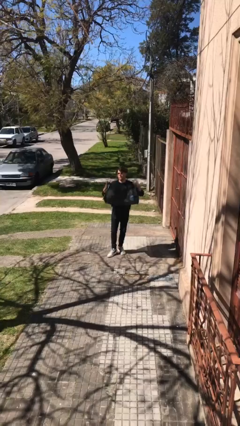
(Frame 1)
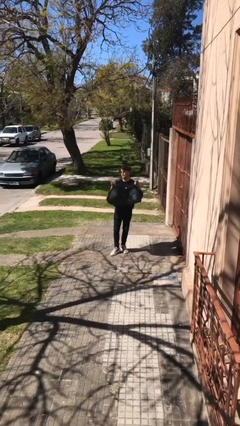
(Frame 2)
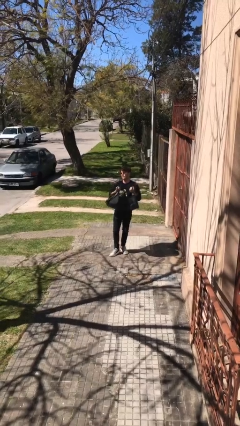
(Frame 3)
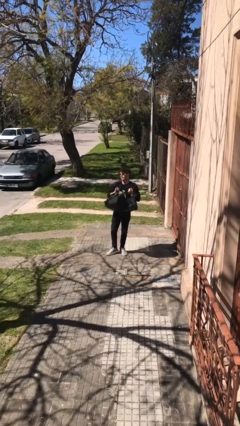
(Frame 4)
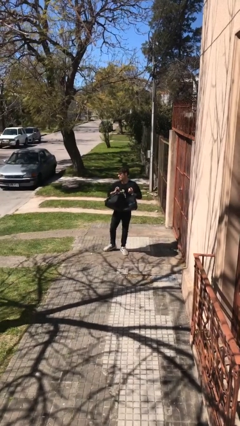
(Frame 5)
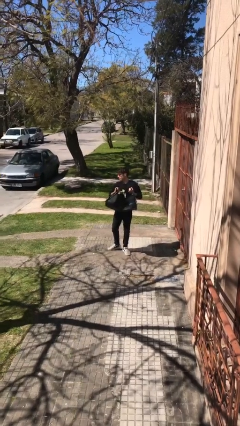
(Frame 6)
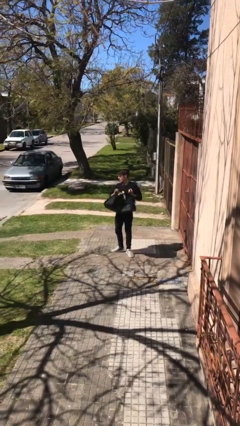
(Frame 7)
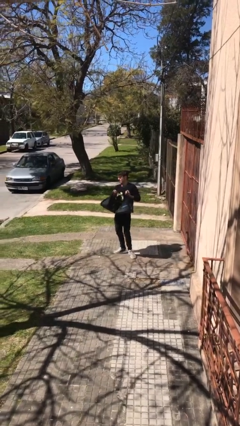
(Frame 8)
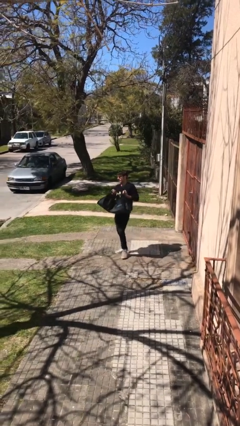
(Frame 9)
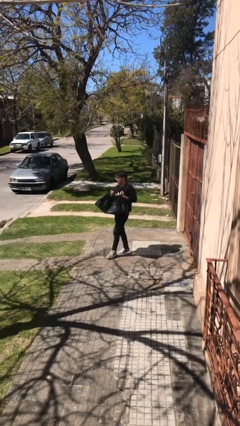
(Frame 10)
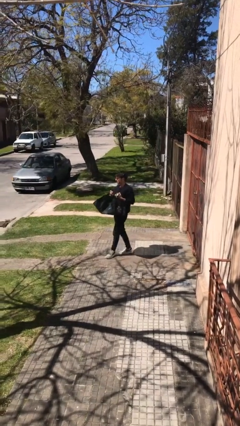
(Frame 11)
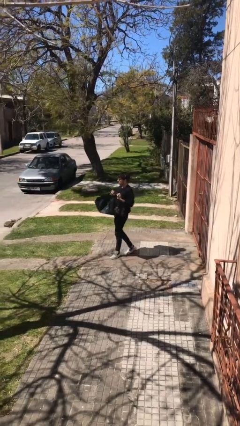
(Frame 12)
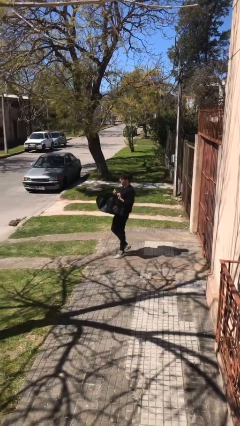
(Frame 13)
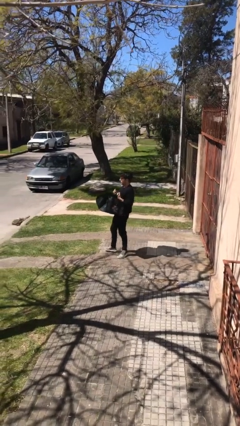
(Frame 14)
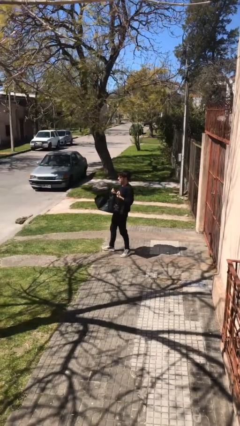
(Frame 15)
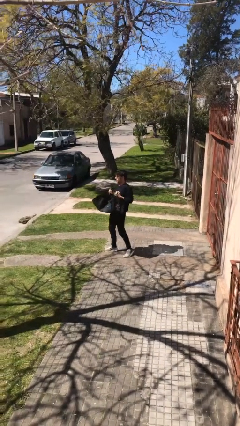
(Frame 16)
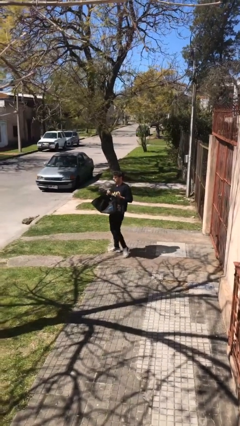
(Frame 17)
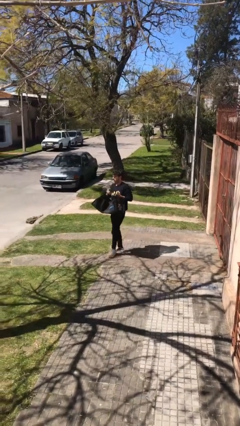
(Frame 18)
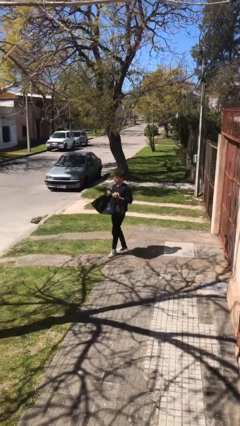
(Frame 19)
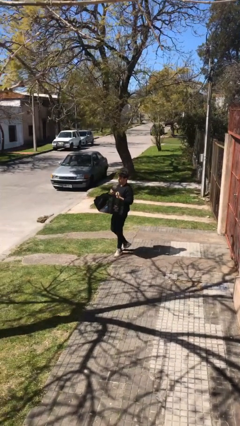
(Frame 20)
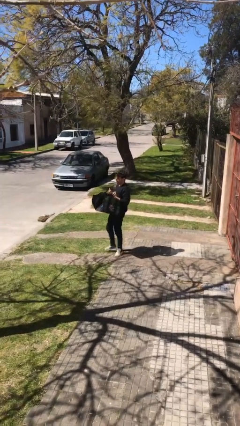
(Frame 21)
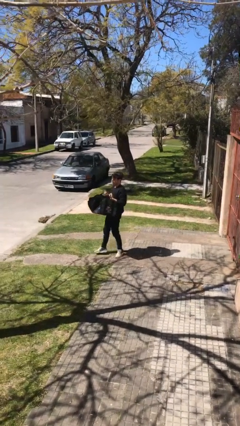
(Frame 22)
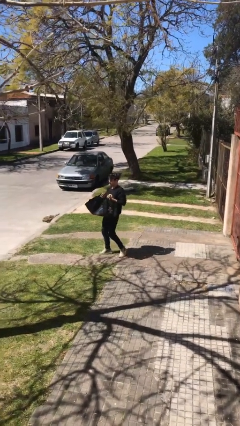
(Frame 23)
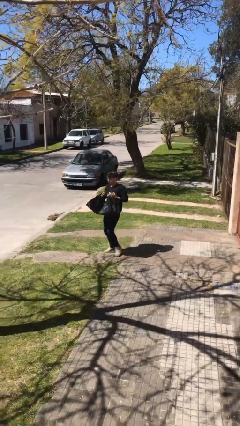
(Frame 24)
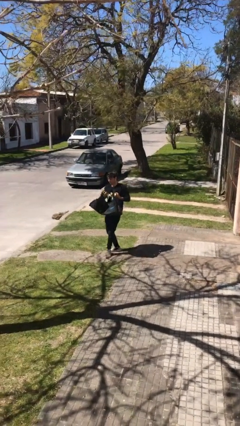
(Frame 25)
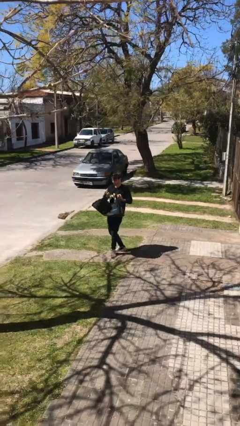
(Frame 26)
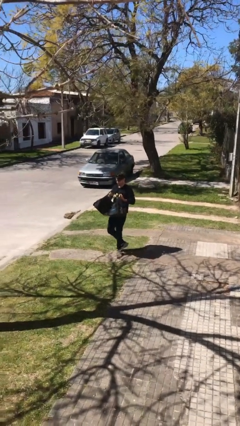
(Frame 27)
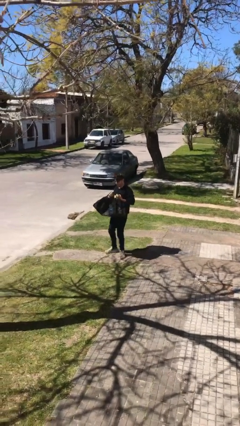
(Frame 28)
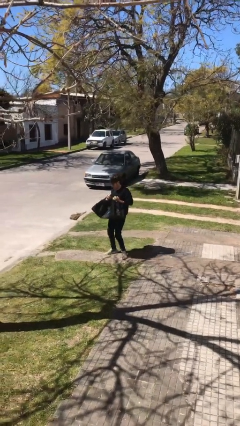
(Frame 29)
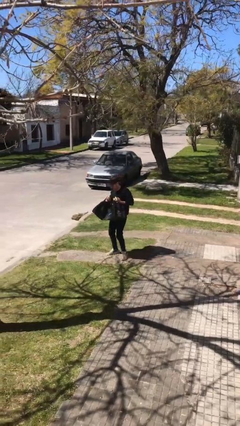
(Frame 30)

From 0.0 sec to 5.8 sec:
person carries heavy object

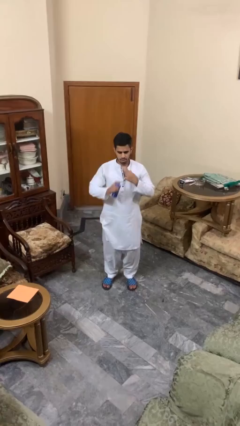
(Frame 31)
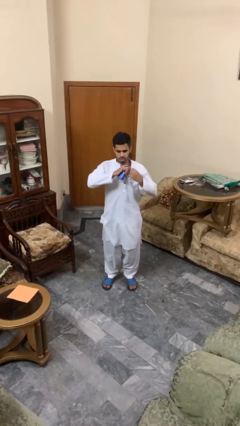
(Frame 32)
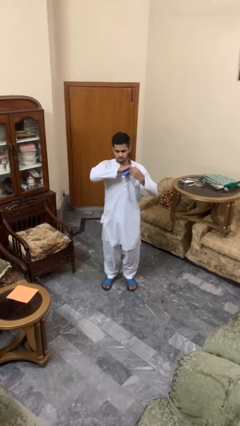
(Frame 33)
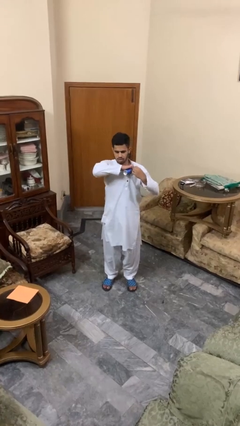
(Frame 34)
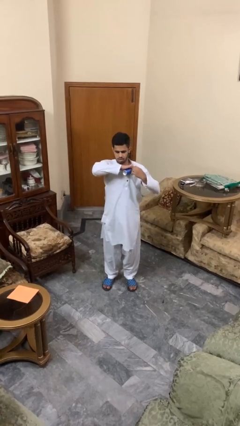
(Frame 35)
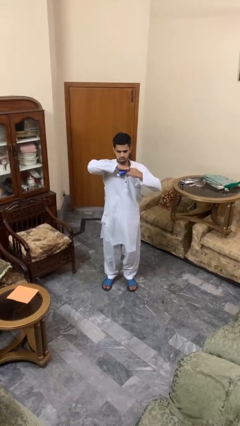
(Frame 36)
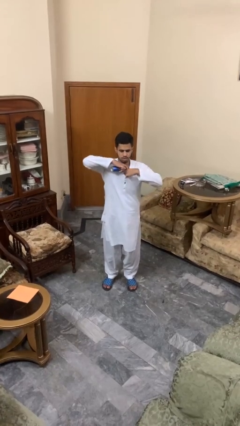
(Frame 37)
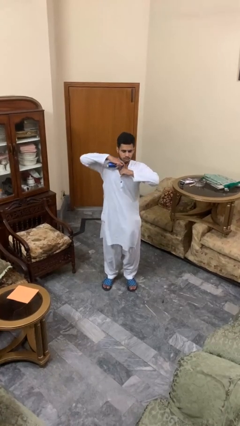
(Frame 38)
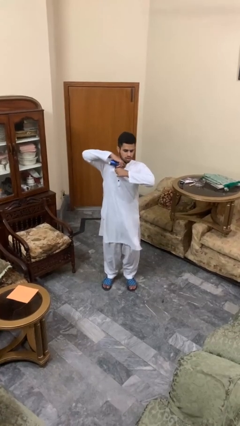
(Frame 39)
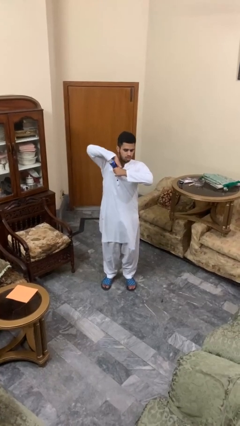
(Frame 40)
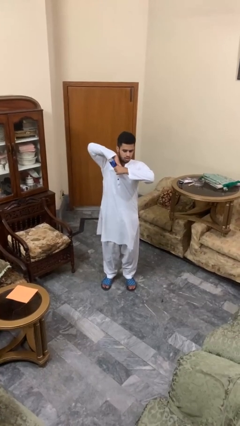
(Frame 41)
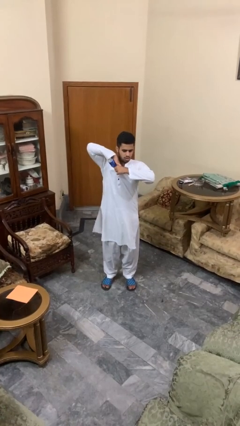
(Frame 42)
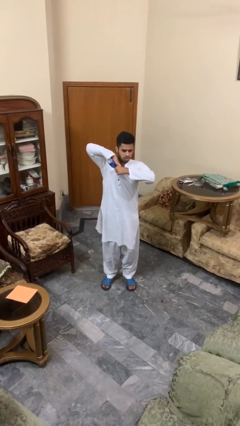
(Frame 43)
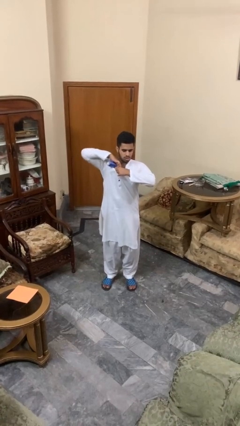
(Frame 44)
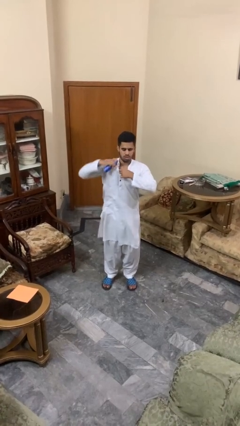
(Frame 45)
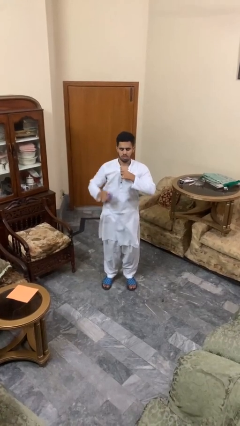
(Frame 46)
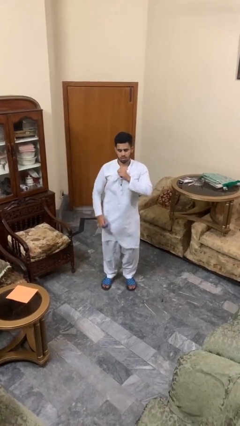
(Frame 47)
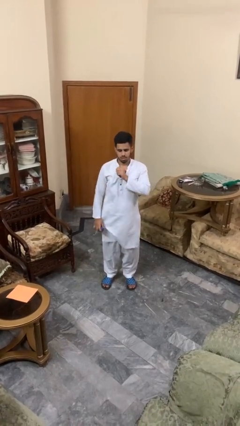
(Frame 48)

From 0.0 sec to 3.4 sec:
person applies deodorant

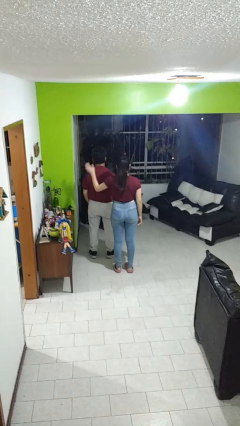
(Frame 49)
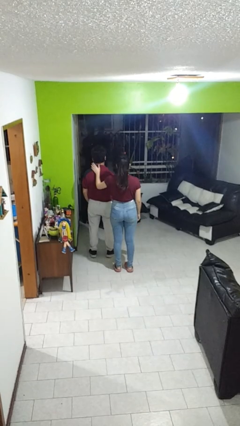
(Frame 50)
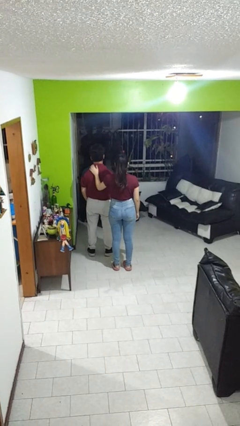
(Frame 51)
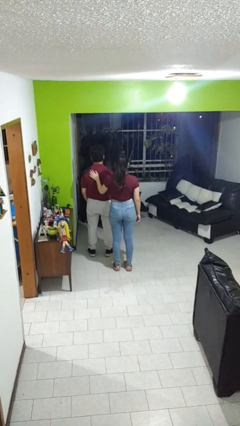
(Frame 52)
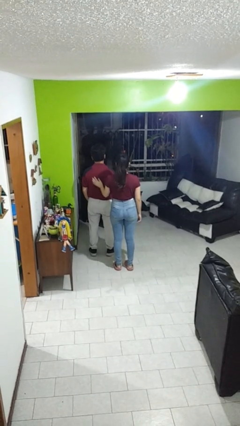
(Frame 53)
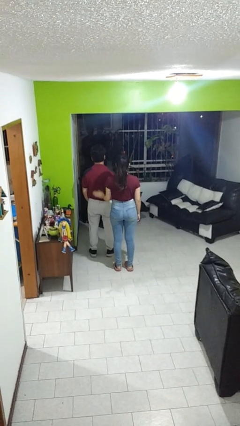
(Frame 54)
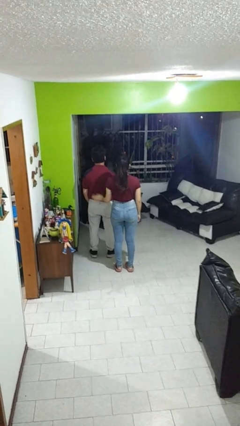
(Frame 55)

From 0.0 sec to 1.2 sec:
person touches back of person

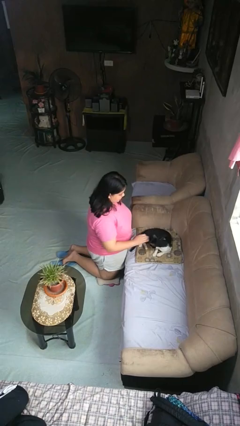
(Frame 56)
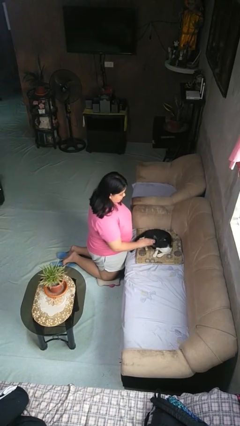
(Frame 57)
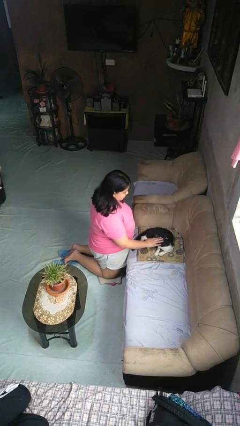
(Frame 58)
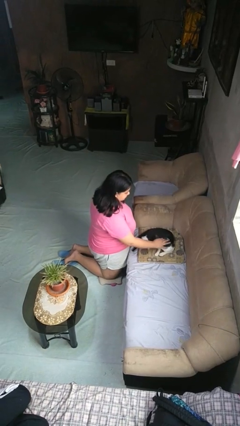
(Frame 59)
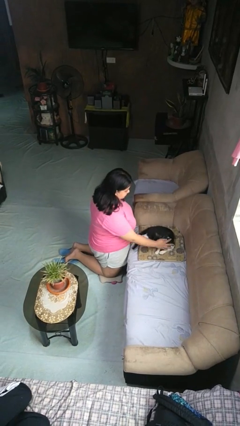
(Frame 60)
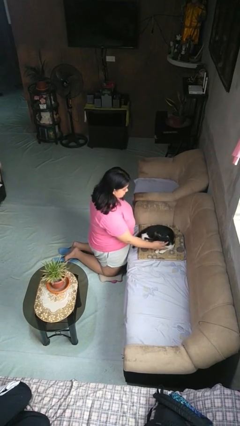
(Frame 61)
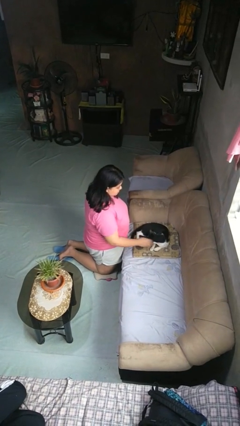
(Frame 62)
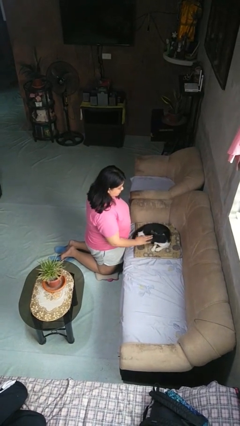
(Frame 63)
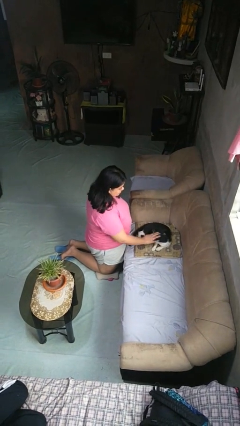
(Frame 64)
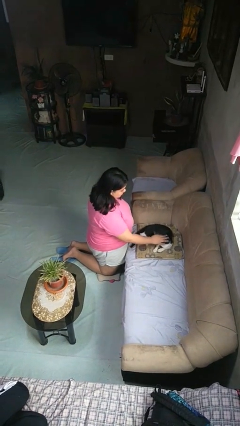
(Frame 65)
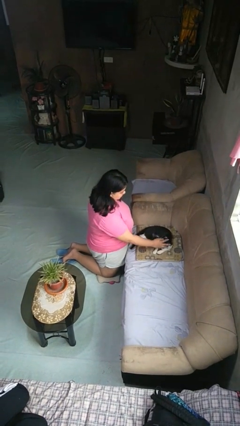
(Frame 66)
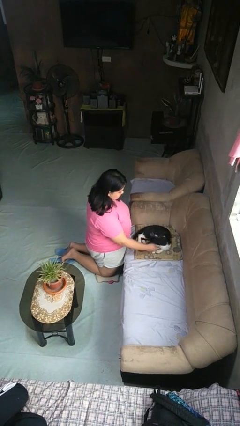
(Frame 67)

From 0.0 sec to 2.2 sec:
person pets cat

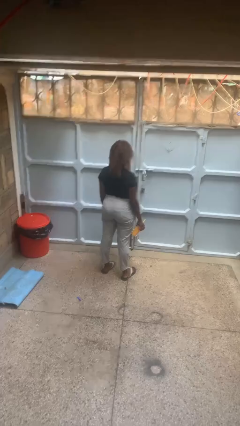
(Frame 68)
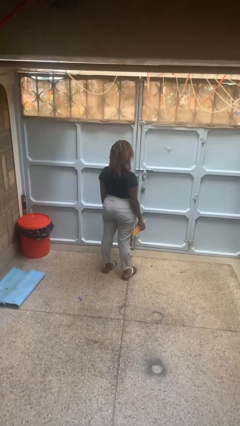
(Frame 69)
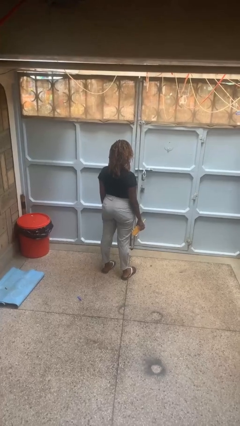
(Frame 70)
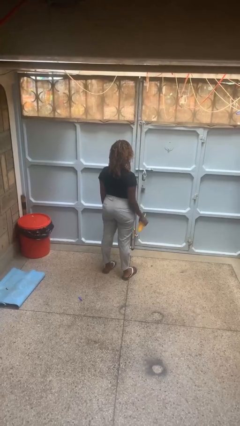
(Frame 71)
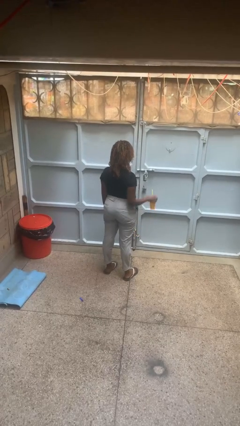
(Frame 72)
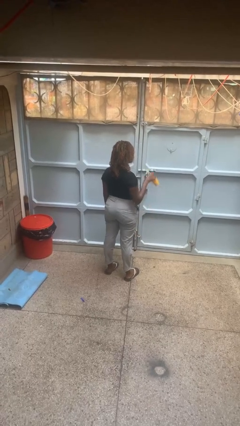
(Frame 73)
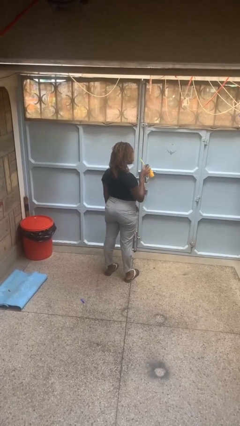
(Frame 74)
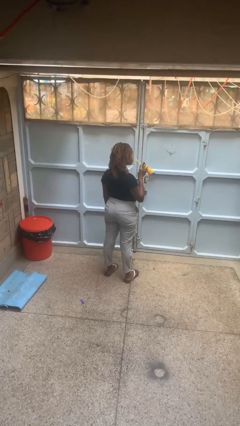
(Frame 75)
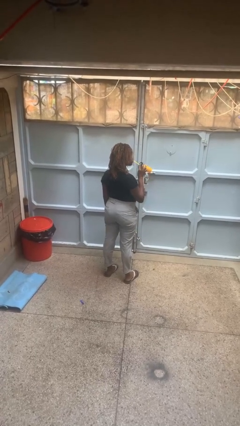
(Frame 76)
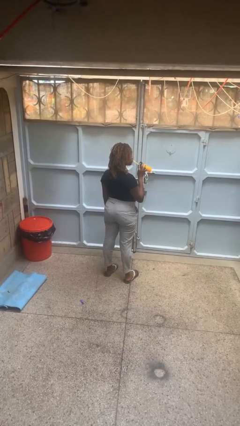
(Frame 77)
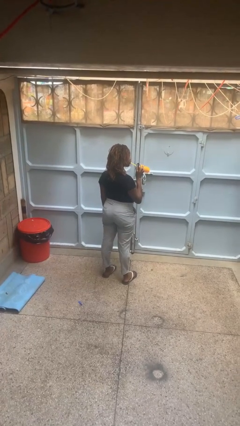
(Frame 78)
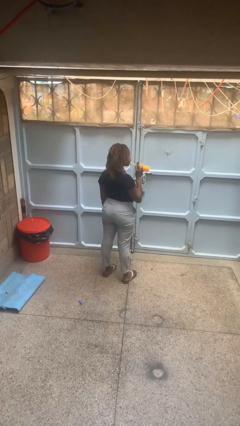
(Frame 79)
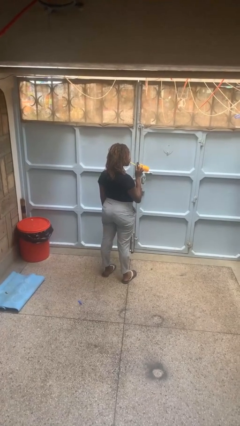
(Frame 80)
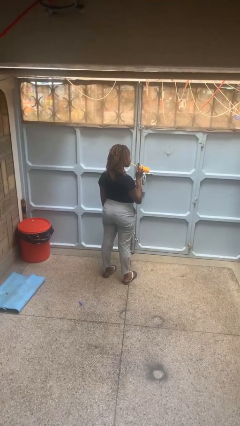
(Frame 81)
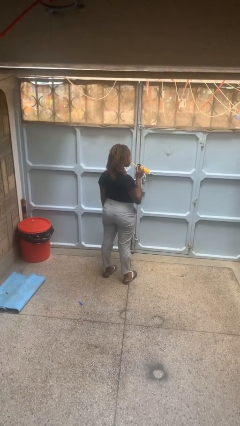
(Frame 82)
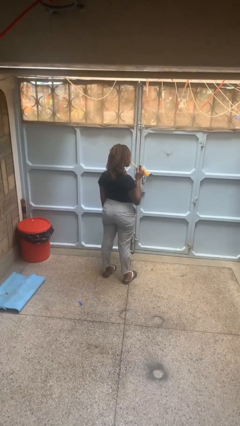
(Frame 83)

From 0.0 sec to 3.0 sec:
person drinks from straw

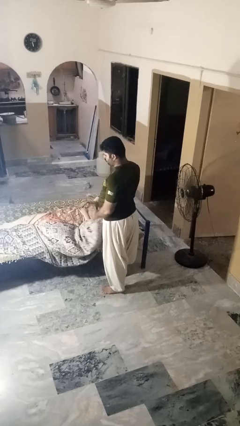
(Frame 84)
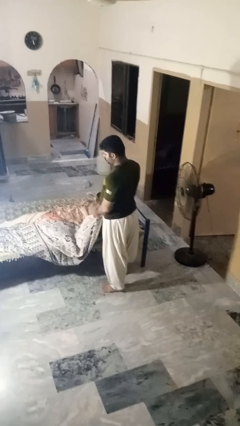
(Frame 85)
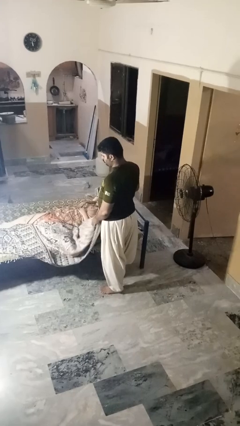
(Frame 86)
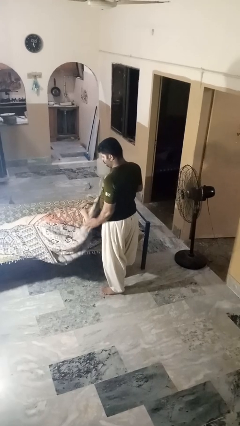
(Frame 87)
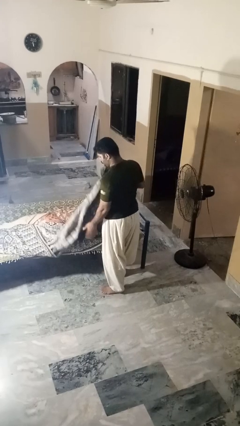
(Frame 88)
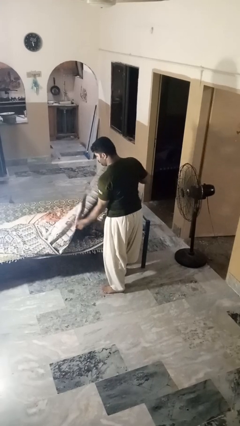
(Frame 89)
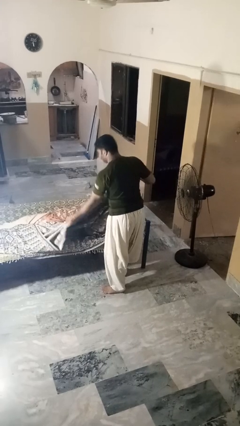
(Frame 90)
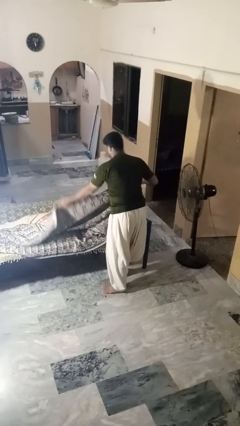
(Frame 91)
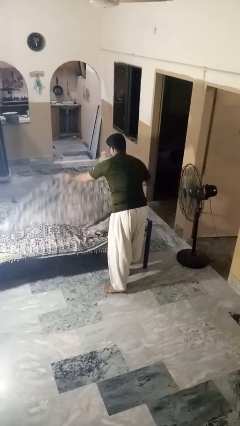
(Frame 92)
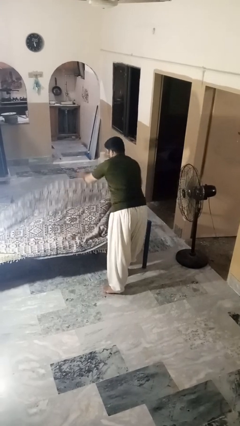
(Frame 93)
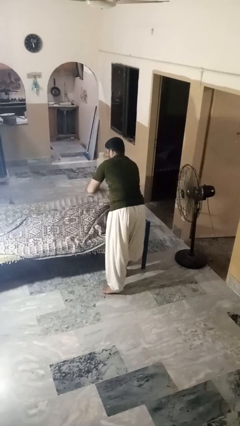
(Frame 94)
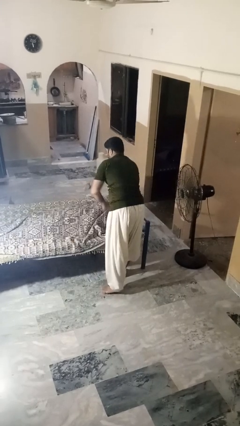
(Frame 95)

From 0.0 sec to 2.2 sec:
person covers friend with blanket
